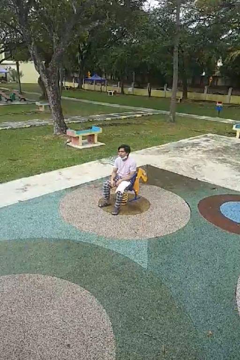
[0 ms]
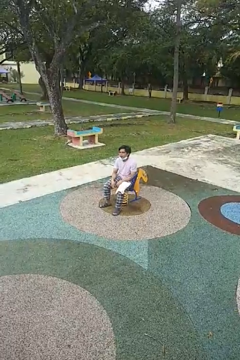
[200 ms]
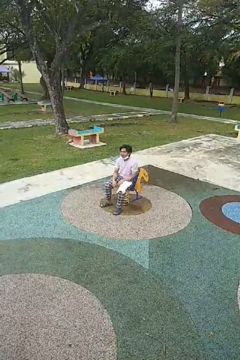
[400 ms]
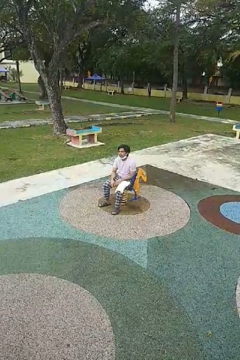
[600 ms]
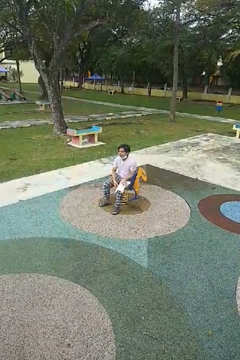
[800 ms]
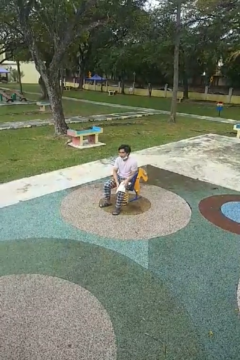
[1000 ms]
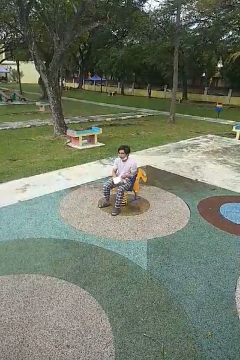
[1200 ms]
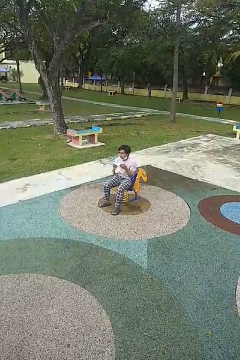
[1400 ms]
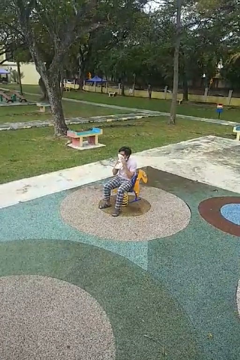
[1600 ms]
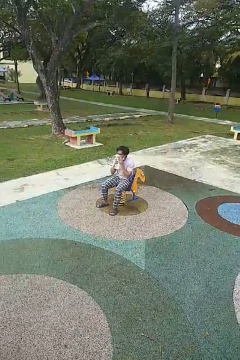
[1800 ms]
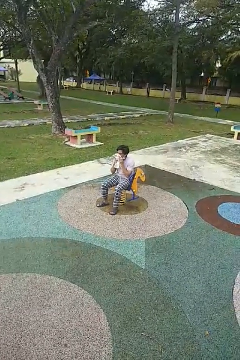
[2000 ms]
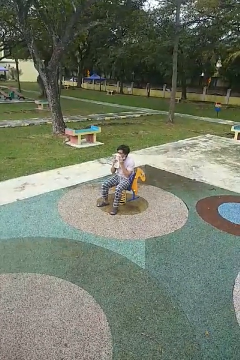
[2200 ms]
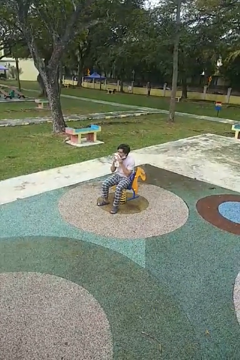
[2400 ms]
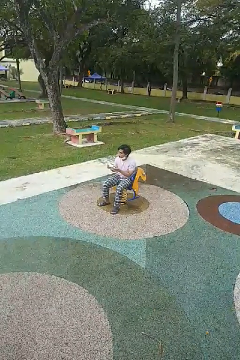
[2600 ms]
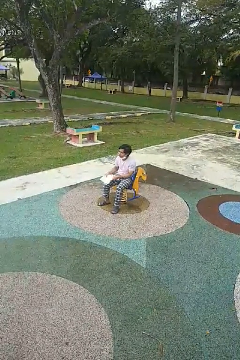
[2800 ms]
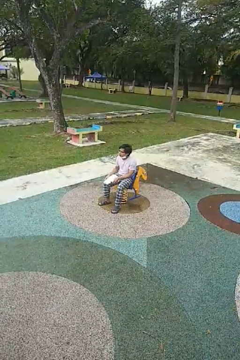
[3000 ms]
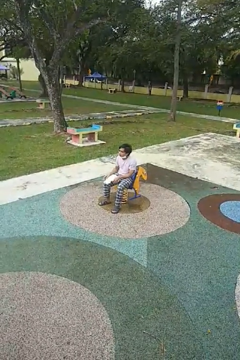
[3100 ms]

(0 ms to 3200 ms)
person wipes mouth with napkin

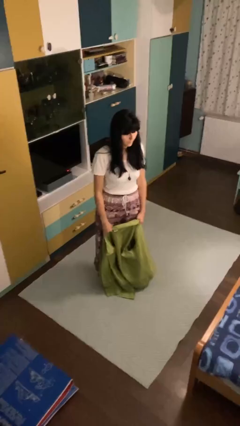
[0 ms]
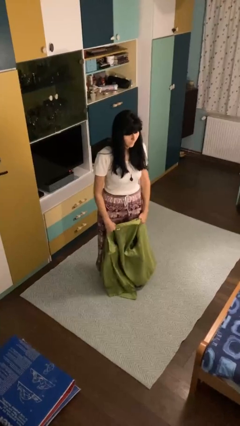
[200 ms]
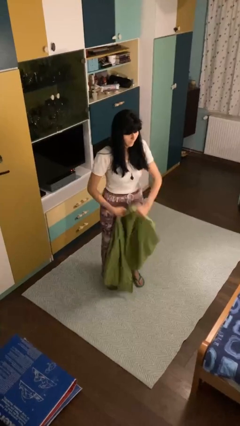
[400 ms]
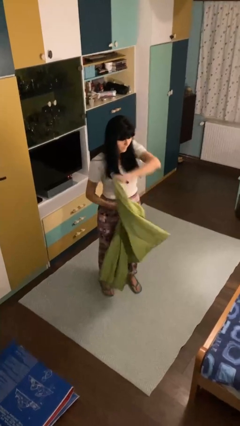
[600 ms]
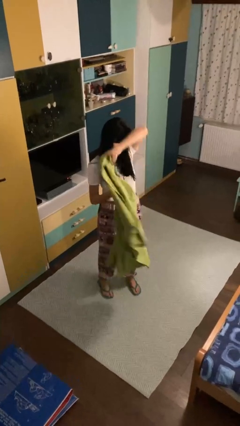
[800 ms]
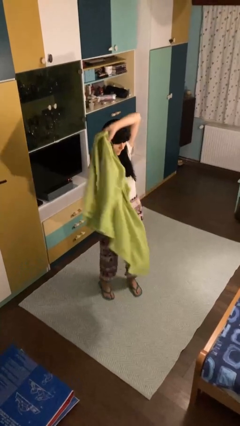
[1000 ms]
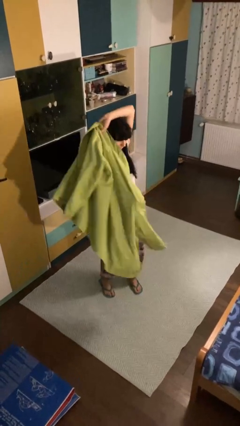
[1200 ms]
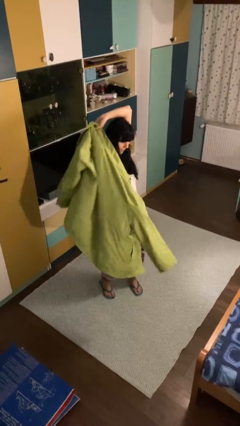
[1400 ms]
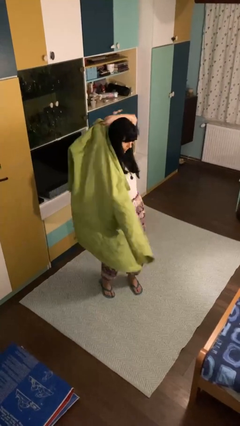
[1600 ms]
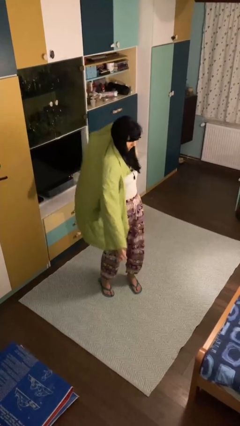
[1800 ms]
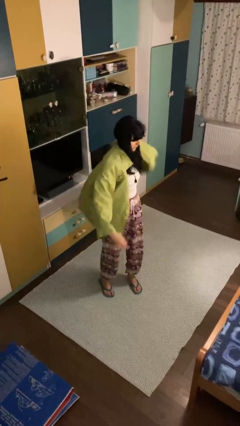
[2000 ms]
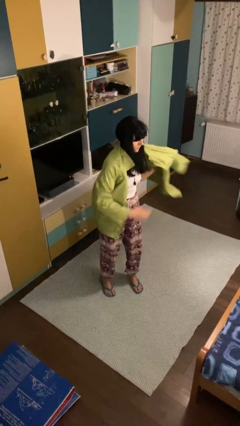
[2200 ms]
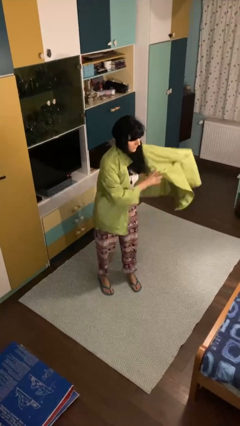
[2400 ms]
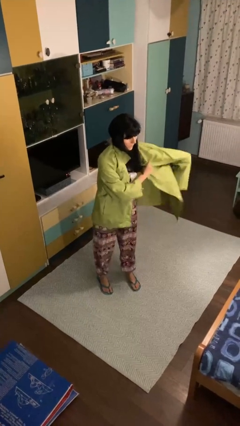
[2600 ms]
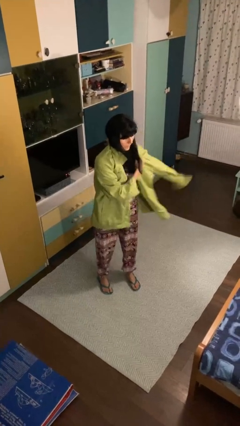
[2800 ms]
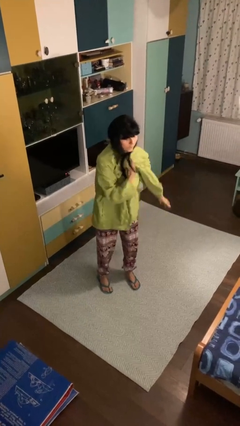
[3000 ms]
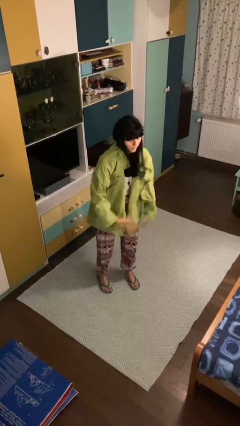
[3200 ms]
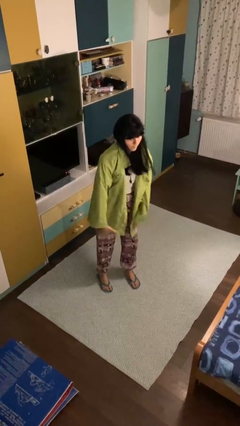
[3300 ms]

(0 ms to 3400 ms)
person puts on jacket

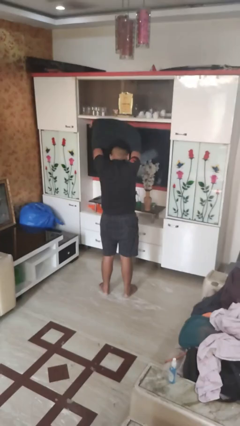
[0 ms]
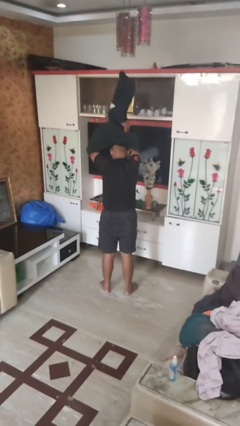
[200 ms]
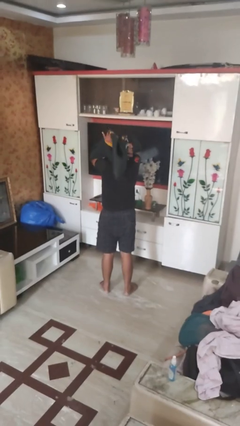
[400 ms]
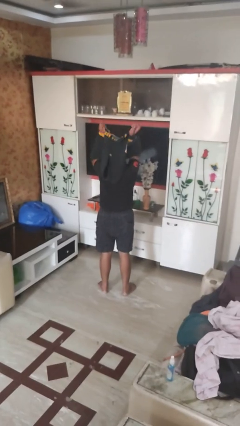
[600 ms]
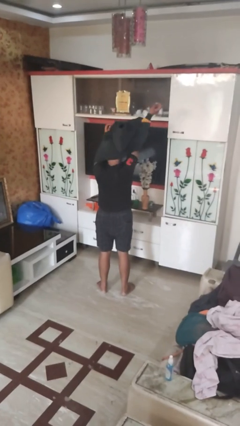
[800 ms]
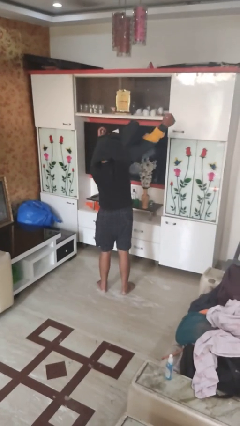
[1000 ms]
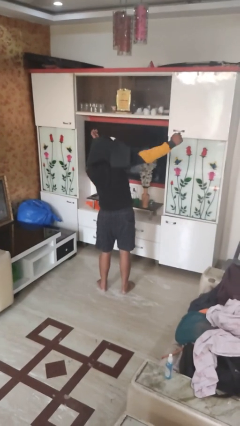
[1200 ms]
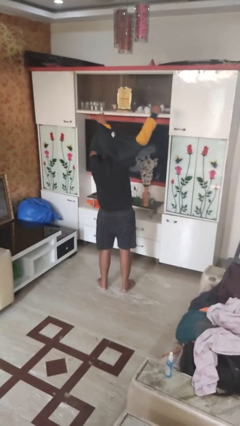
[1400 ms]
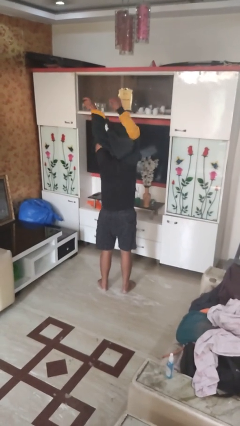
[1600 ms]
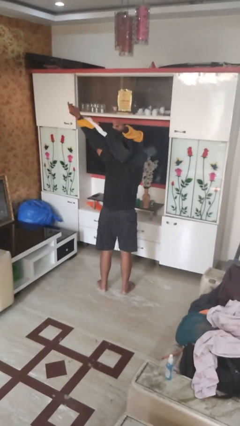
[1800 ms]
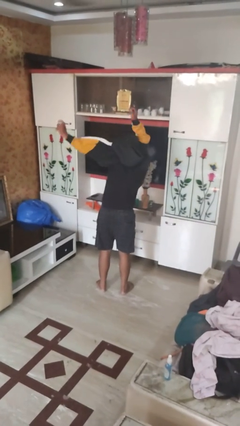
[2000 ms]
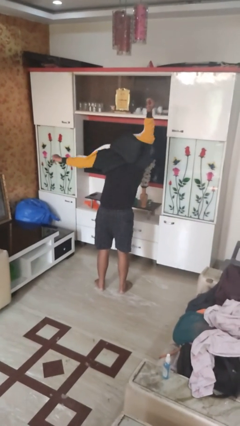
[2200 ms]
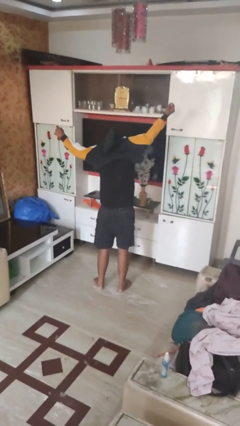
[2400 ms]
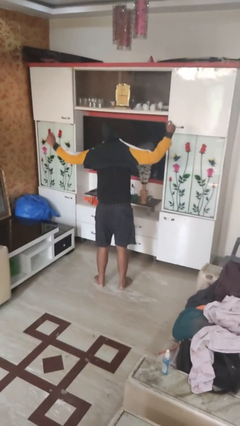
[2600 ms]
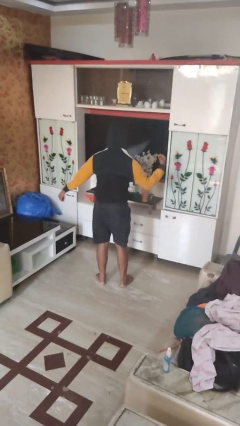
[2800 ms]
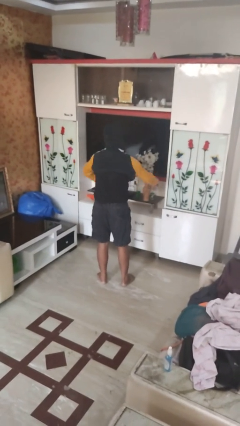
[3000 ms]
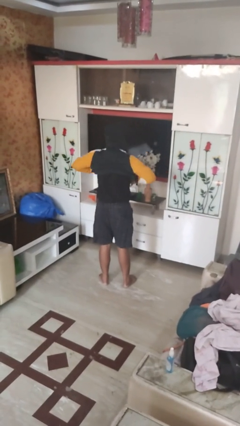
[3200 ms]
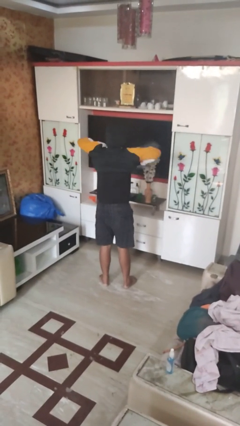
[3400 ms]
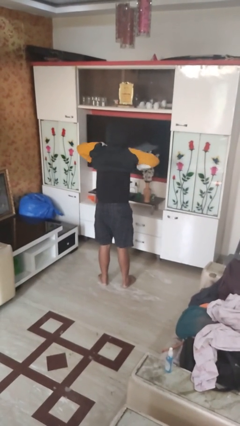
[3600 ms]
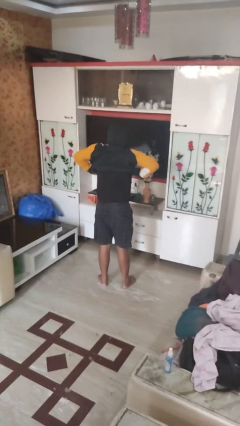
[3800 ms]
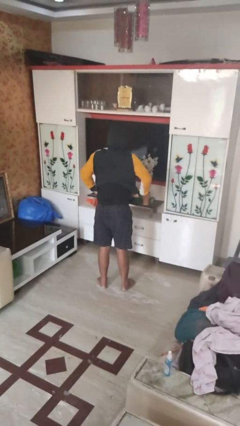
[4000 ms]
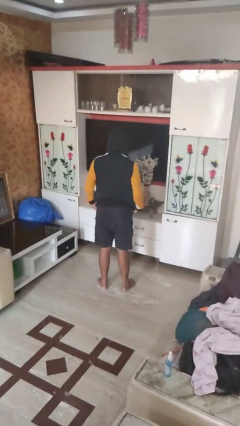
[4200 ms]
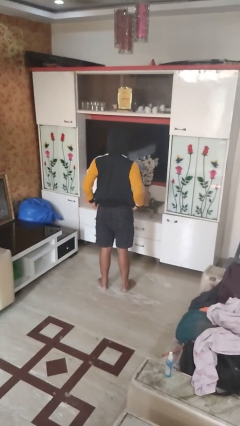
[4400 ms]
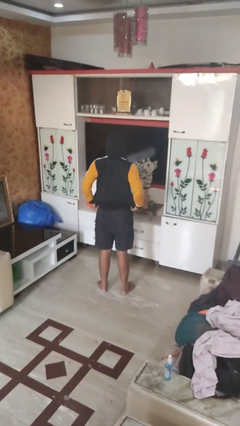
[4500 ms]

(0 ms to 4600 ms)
person puts on hoodie

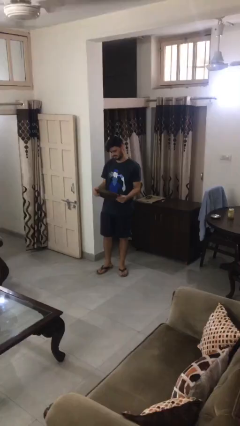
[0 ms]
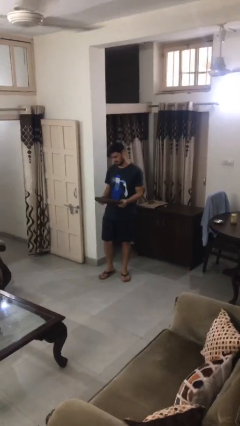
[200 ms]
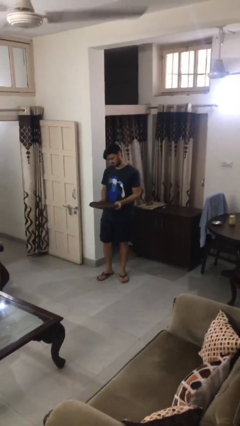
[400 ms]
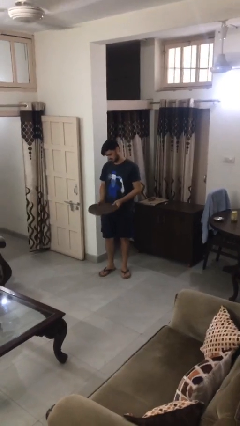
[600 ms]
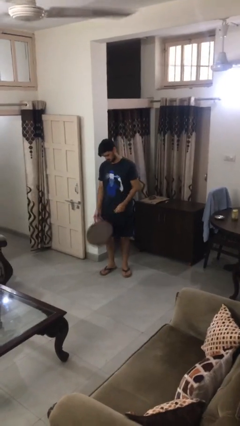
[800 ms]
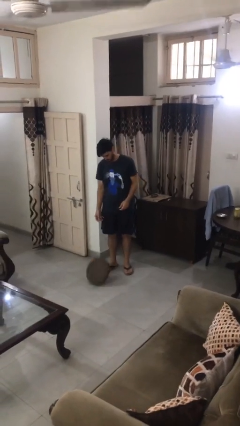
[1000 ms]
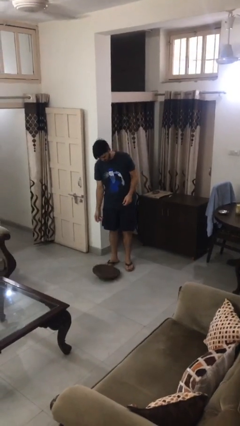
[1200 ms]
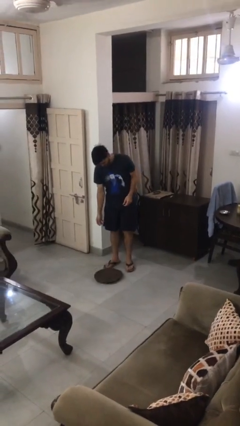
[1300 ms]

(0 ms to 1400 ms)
person drops object

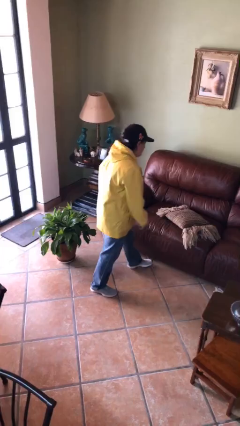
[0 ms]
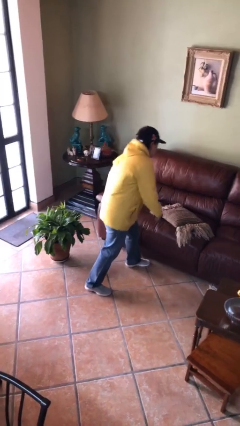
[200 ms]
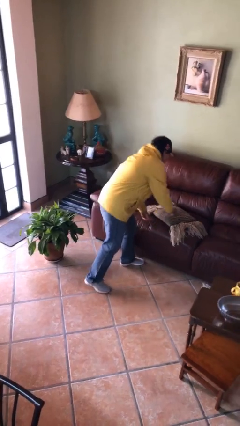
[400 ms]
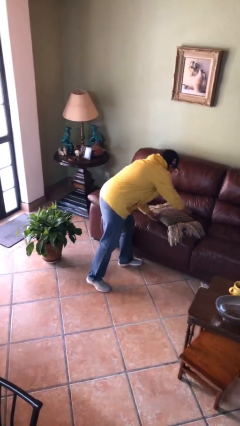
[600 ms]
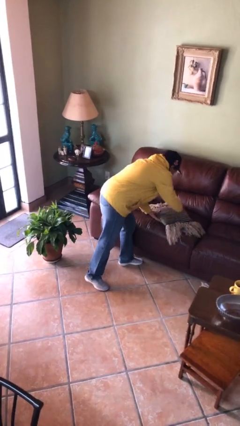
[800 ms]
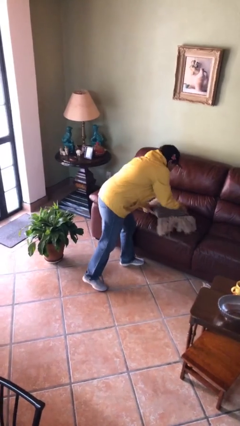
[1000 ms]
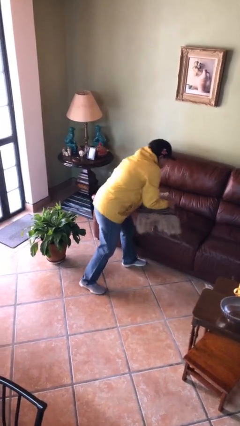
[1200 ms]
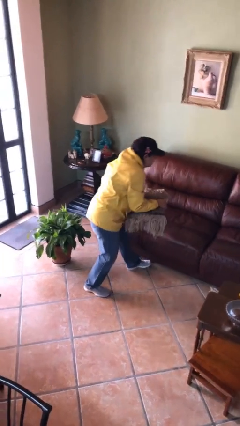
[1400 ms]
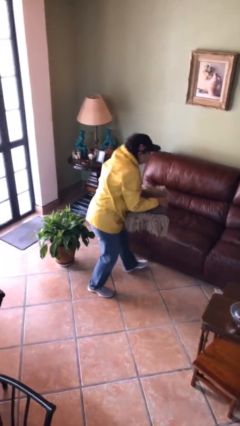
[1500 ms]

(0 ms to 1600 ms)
person picks up object from couch

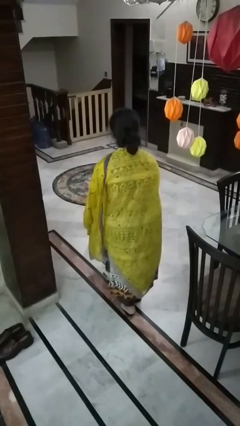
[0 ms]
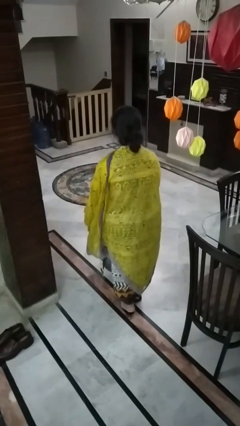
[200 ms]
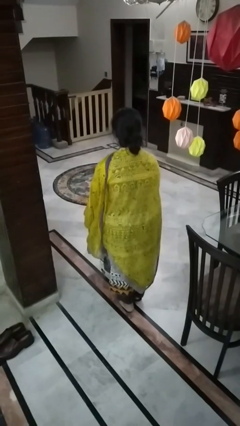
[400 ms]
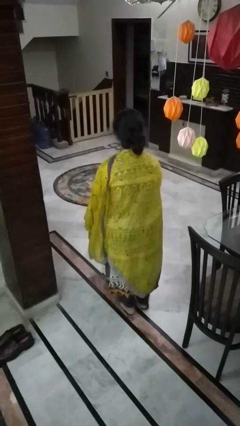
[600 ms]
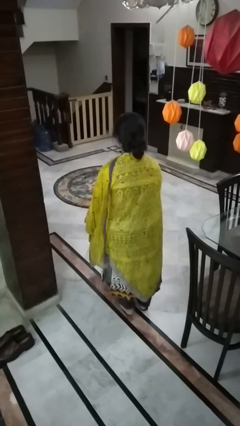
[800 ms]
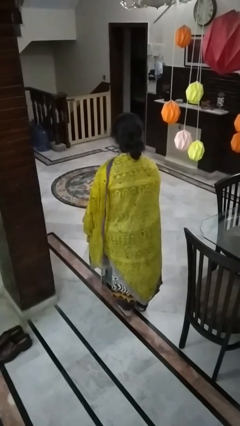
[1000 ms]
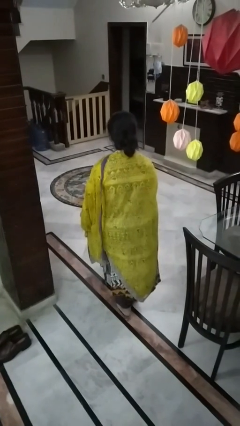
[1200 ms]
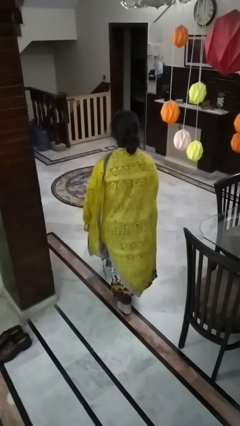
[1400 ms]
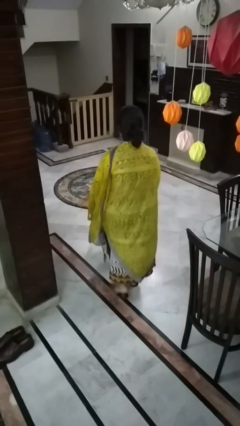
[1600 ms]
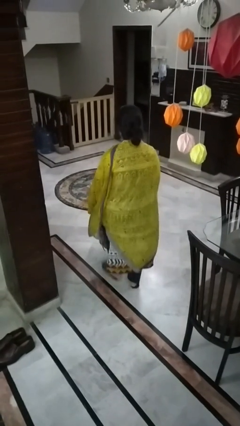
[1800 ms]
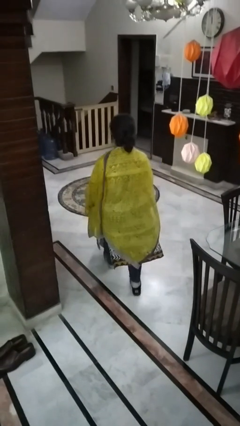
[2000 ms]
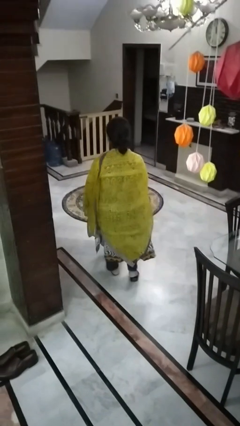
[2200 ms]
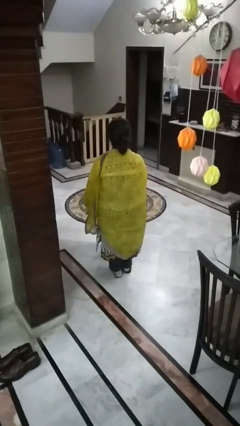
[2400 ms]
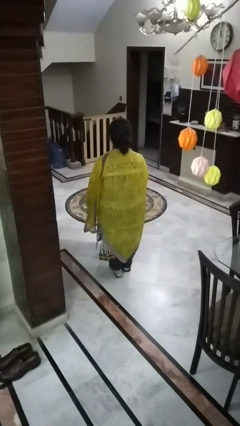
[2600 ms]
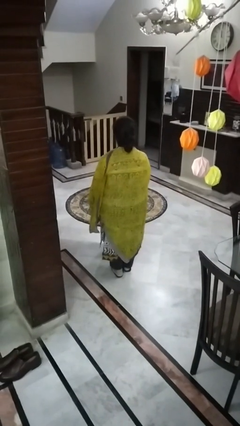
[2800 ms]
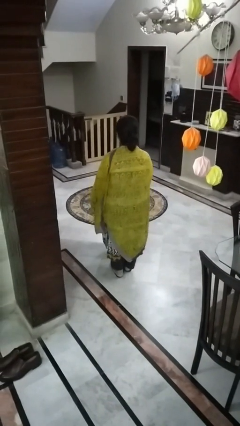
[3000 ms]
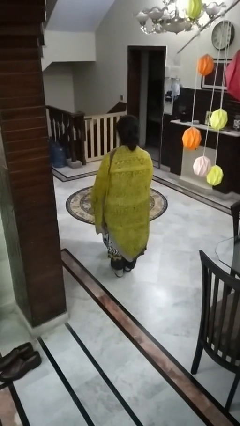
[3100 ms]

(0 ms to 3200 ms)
person carries laundry basket

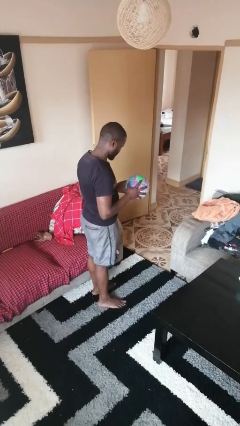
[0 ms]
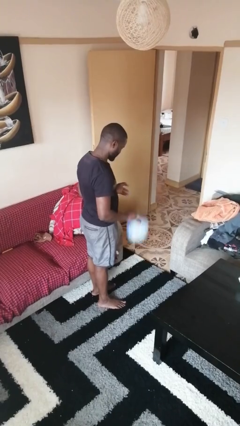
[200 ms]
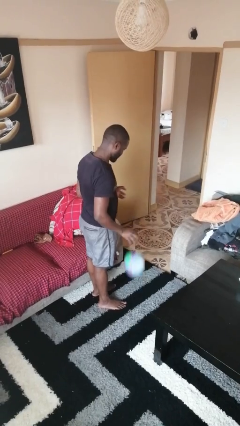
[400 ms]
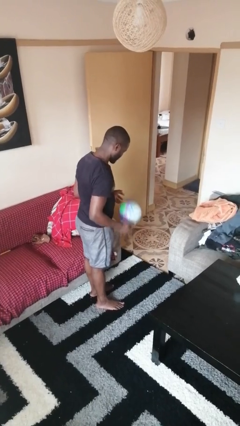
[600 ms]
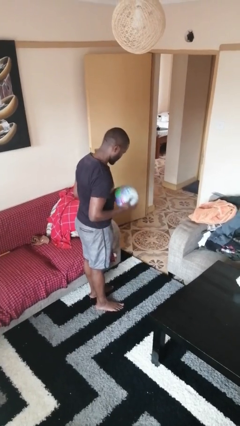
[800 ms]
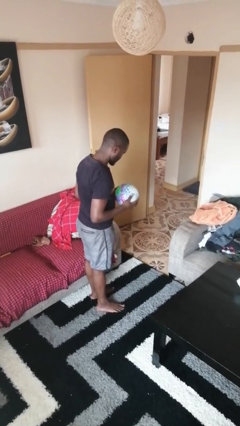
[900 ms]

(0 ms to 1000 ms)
person bounces ball on floor
